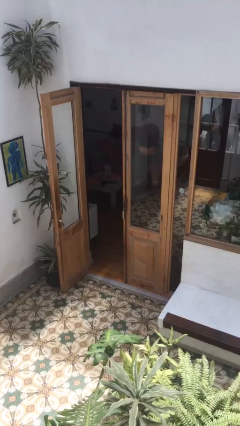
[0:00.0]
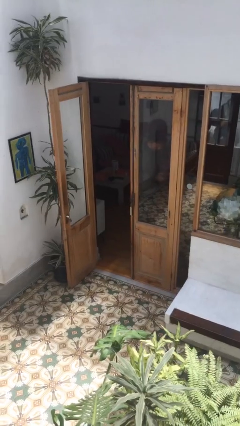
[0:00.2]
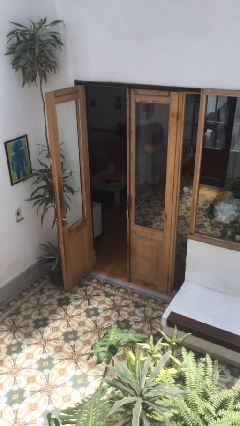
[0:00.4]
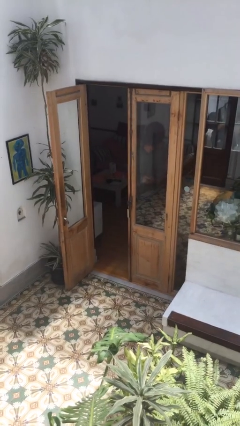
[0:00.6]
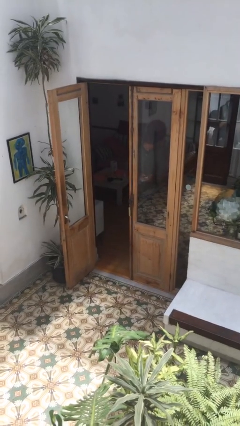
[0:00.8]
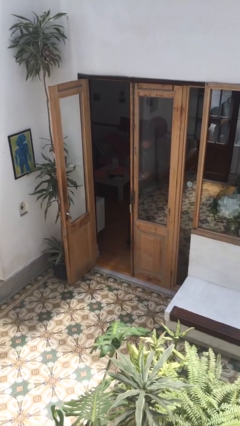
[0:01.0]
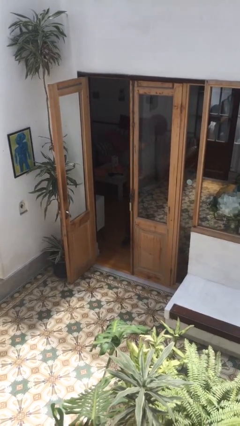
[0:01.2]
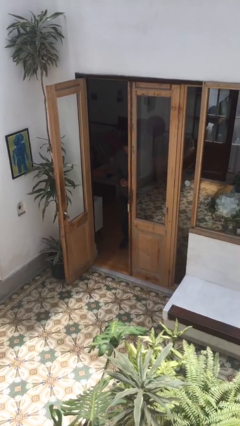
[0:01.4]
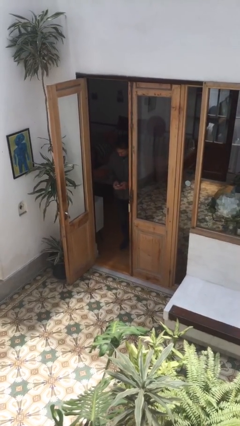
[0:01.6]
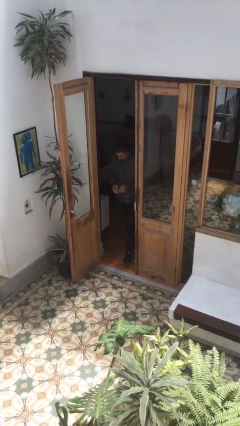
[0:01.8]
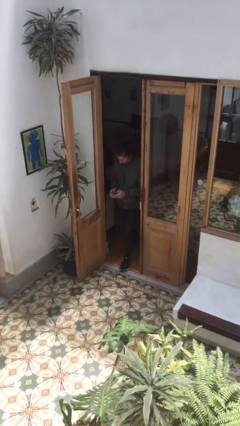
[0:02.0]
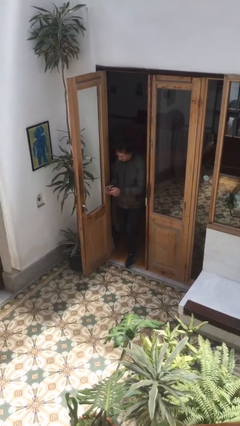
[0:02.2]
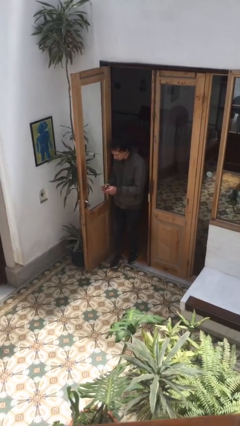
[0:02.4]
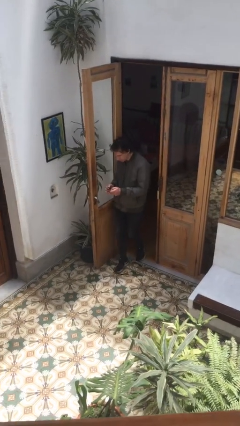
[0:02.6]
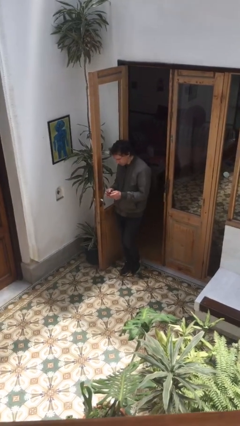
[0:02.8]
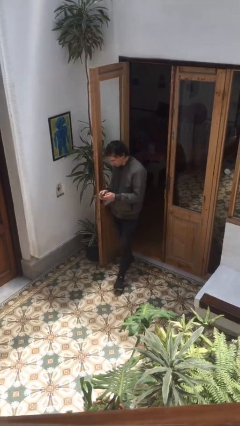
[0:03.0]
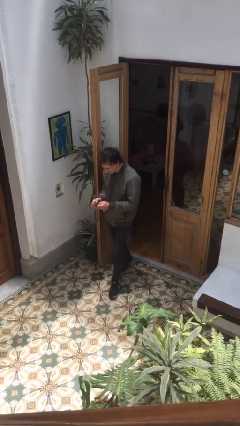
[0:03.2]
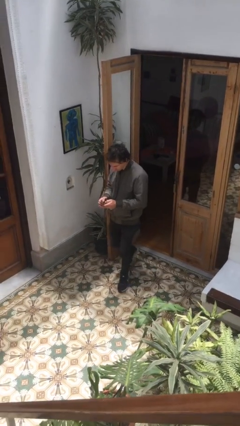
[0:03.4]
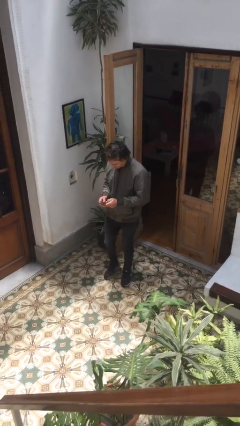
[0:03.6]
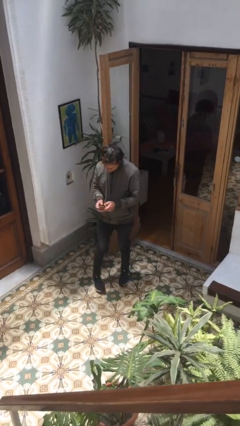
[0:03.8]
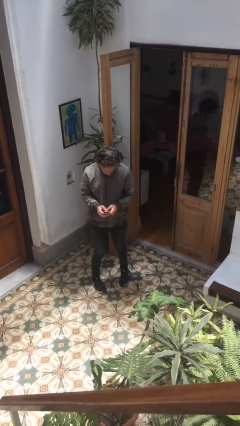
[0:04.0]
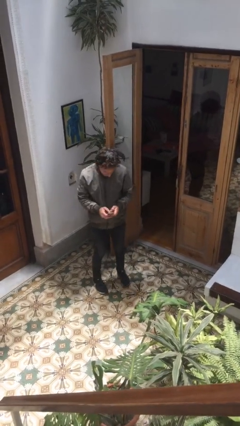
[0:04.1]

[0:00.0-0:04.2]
person enters scene through structure

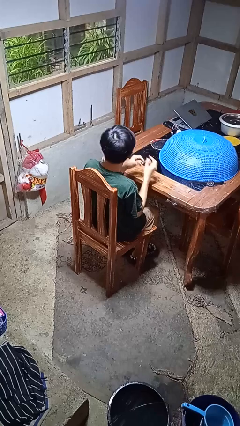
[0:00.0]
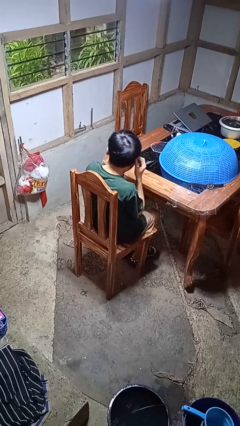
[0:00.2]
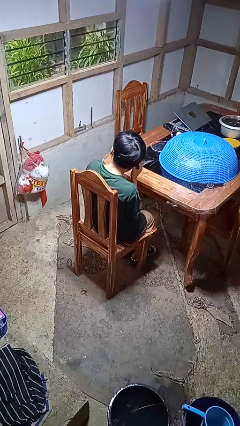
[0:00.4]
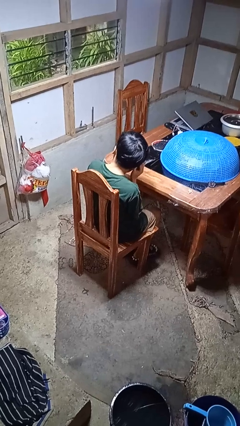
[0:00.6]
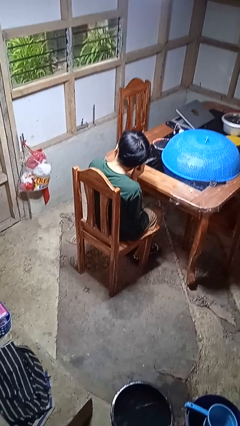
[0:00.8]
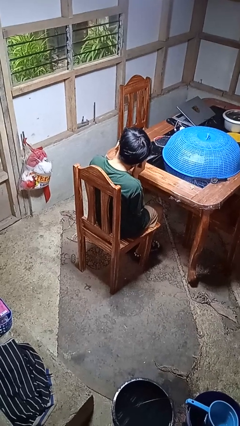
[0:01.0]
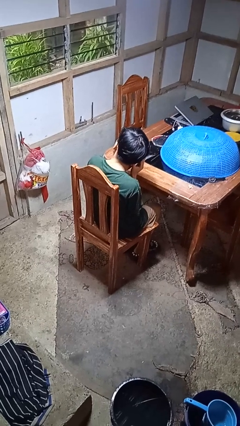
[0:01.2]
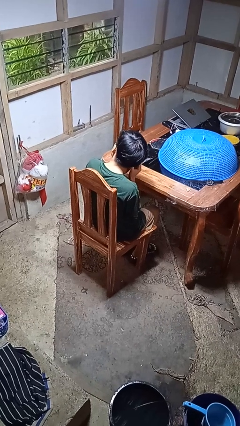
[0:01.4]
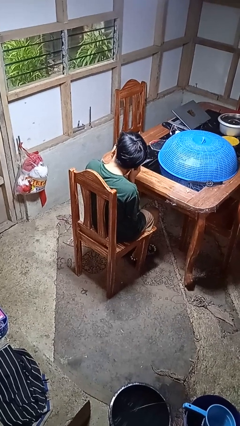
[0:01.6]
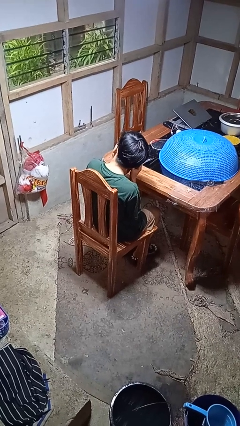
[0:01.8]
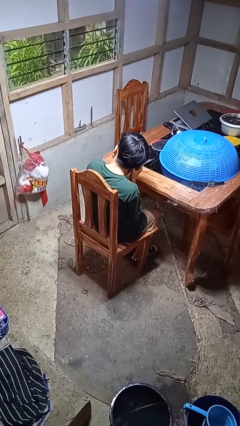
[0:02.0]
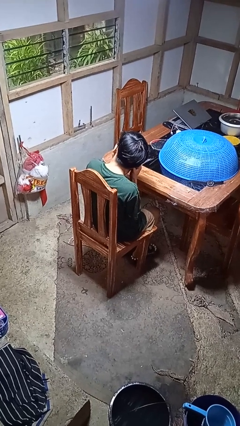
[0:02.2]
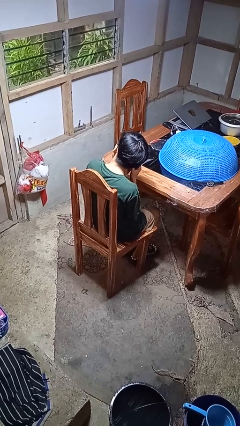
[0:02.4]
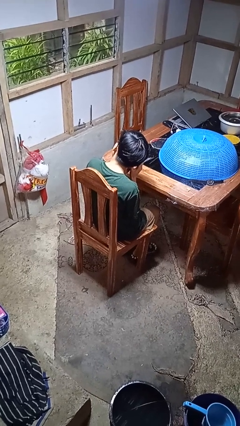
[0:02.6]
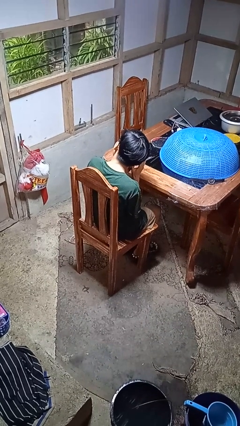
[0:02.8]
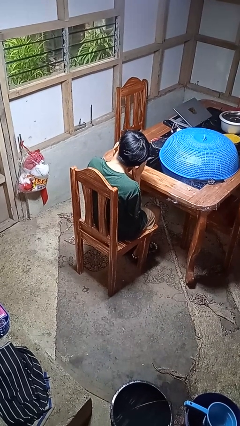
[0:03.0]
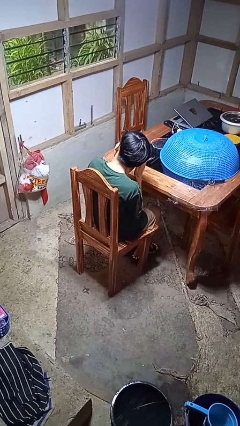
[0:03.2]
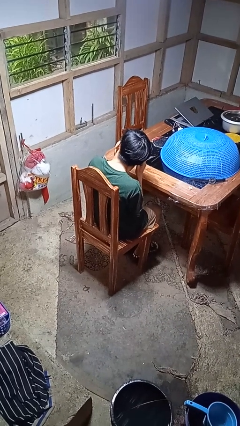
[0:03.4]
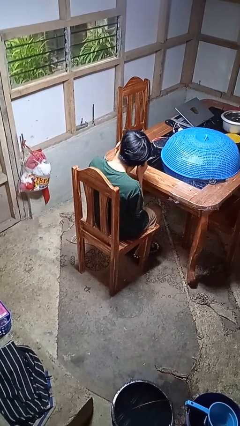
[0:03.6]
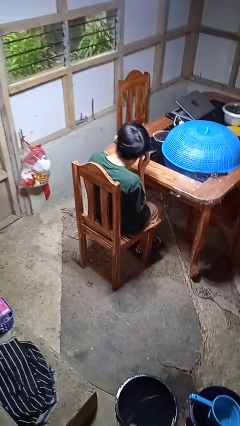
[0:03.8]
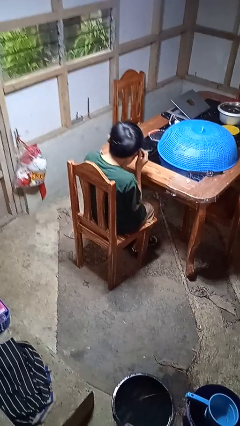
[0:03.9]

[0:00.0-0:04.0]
person takes off earrings

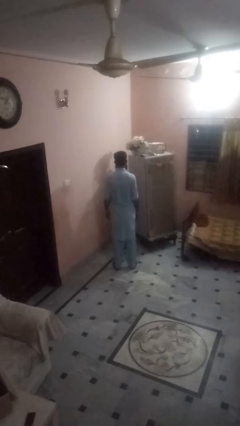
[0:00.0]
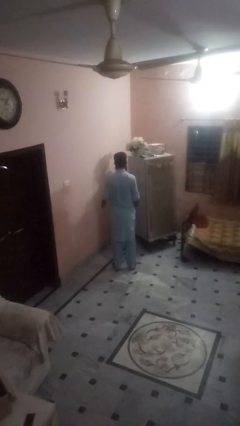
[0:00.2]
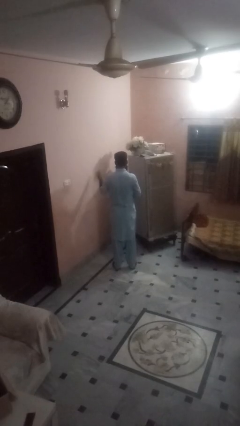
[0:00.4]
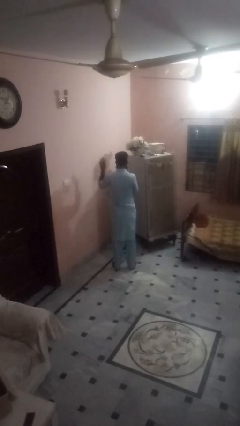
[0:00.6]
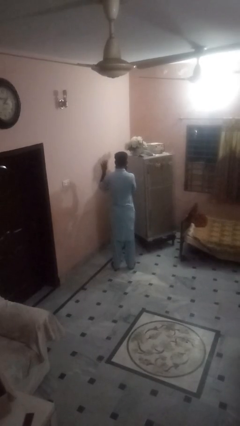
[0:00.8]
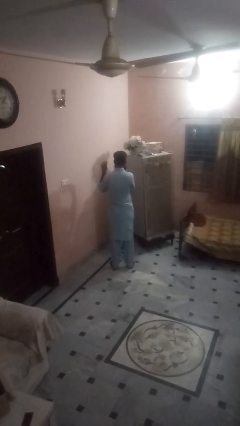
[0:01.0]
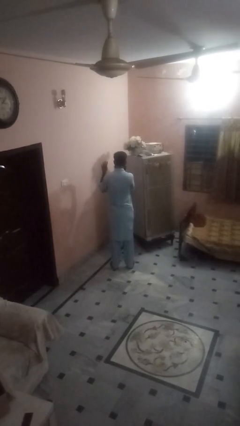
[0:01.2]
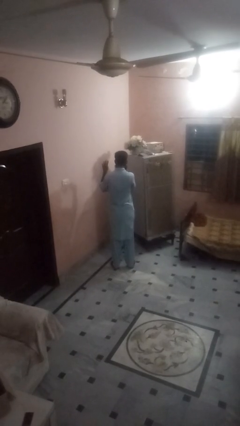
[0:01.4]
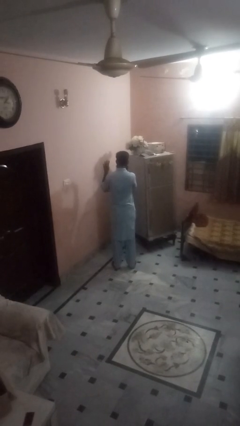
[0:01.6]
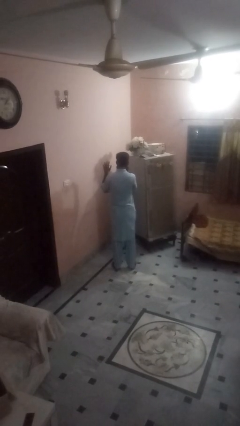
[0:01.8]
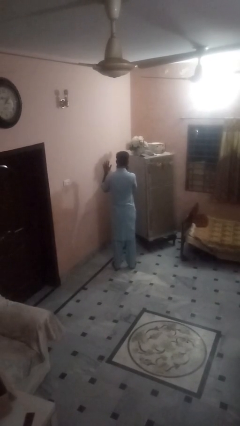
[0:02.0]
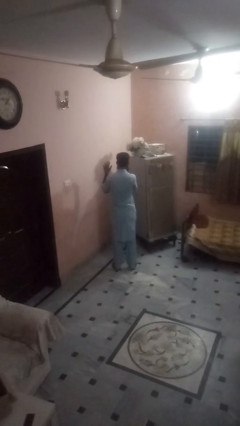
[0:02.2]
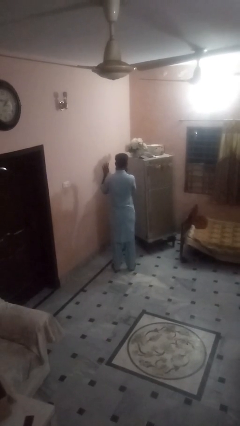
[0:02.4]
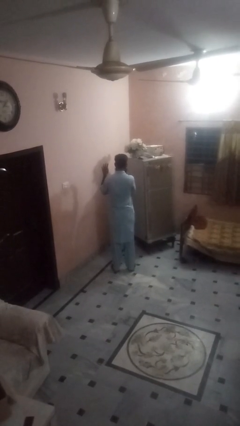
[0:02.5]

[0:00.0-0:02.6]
person gestures number four

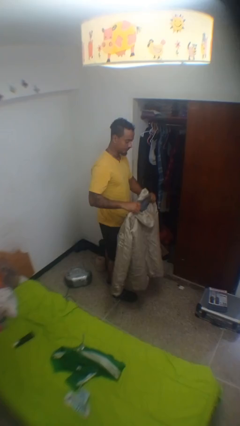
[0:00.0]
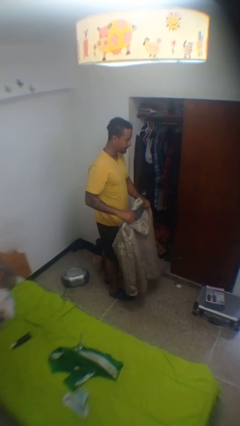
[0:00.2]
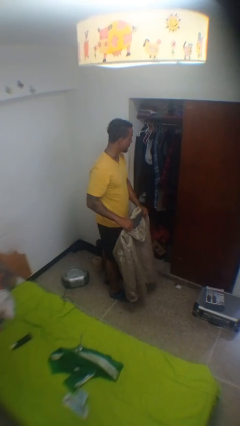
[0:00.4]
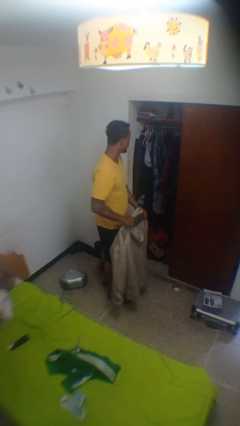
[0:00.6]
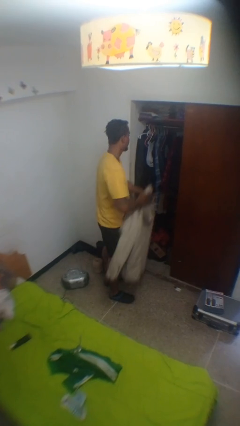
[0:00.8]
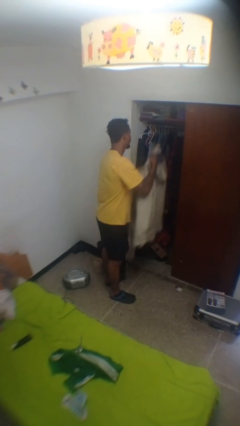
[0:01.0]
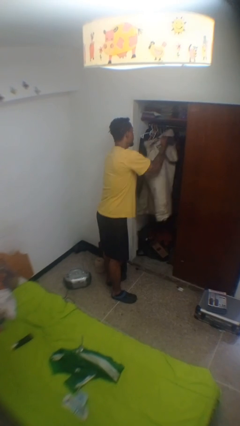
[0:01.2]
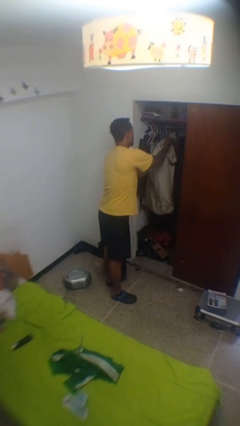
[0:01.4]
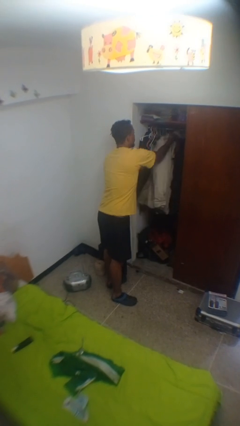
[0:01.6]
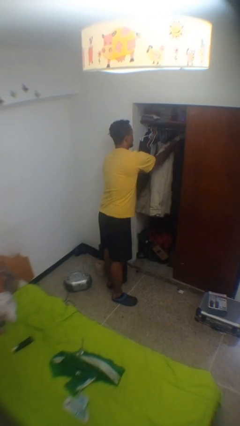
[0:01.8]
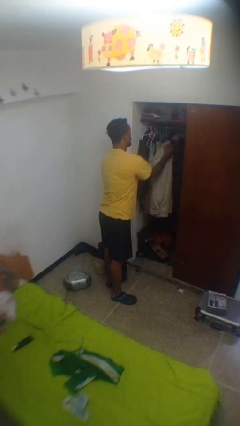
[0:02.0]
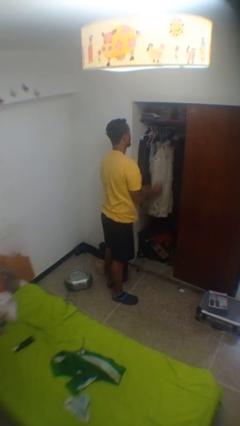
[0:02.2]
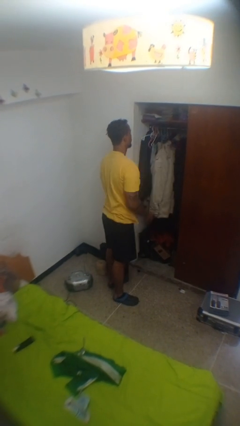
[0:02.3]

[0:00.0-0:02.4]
person puts clothes into closet

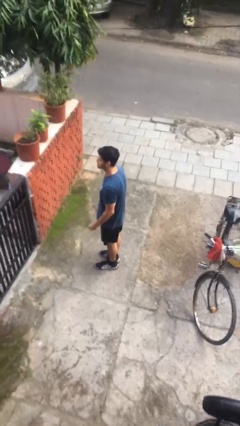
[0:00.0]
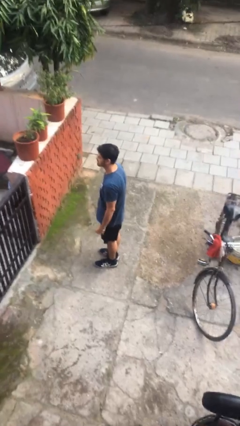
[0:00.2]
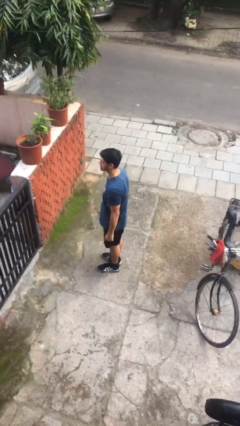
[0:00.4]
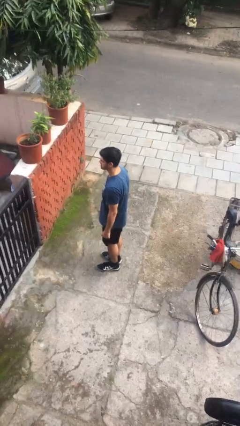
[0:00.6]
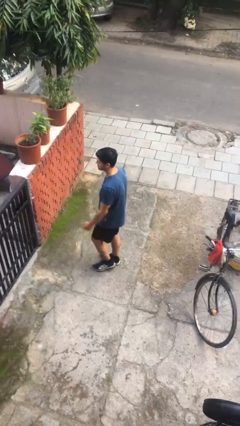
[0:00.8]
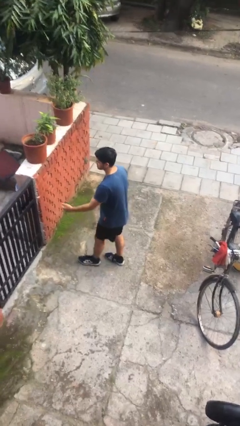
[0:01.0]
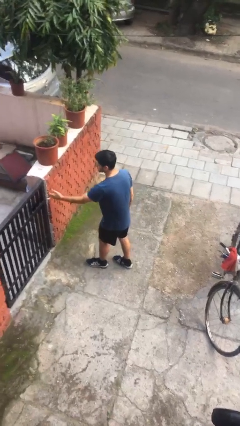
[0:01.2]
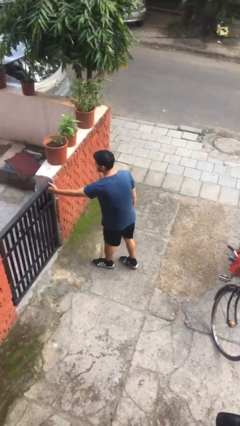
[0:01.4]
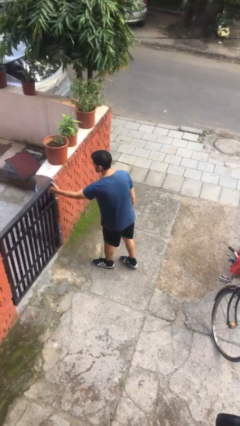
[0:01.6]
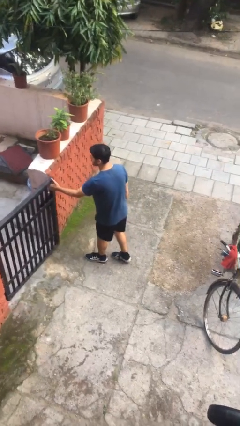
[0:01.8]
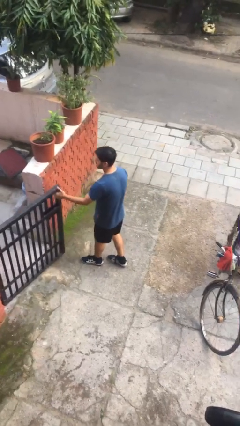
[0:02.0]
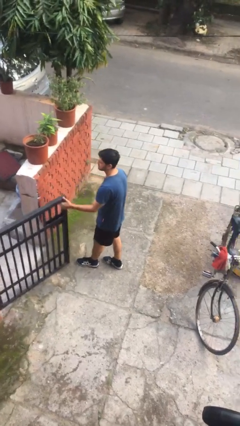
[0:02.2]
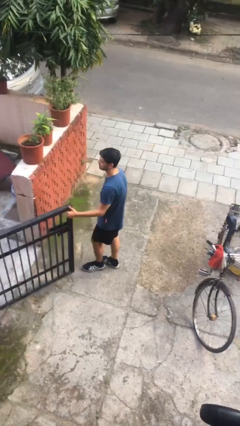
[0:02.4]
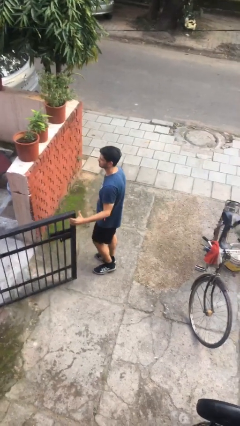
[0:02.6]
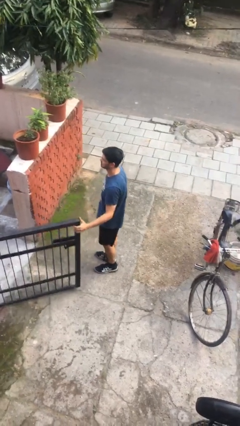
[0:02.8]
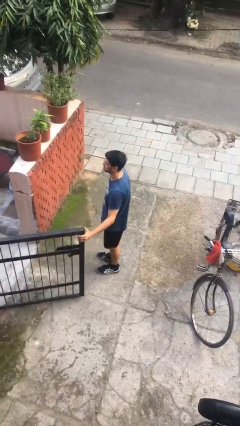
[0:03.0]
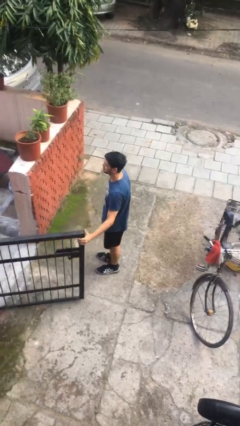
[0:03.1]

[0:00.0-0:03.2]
person opens gate

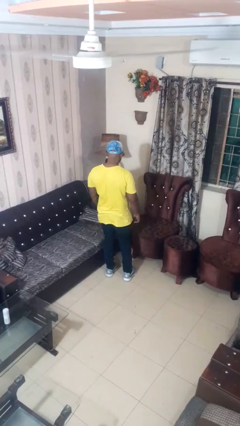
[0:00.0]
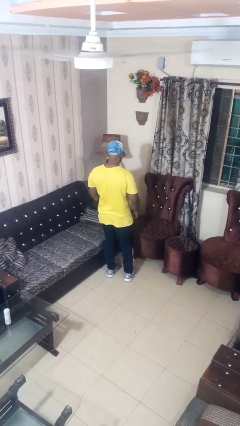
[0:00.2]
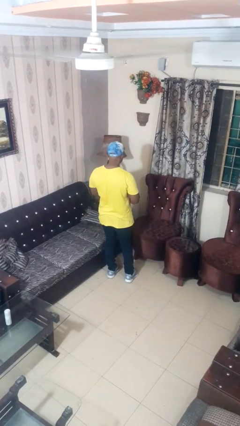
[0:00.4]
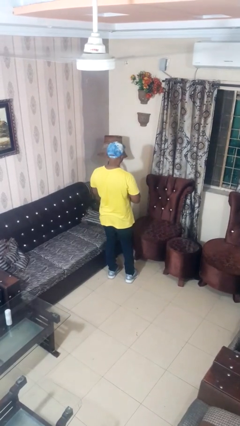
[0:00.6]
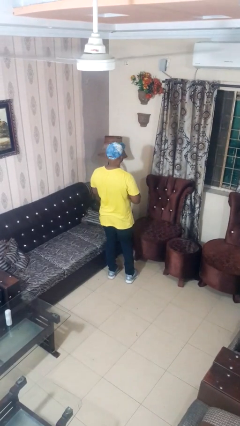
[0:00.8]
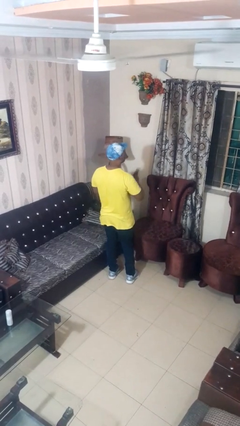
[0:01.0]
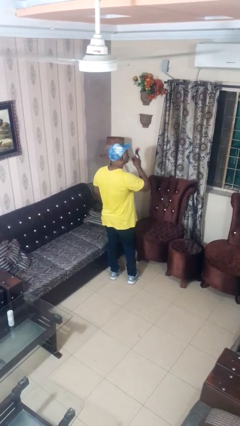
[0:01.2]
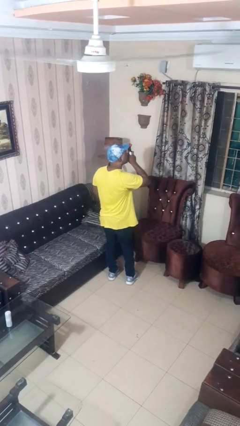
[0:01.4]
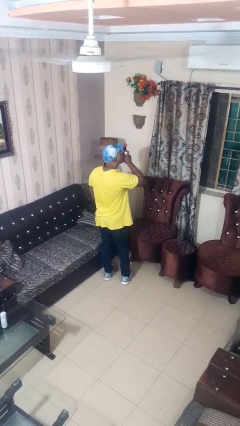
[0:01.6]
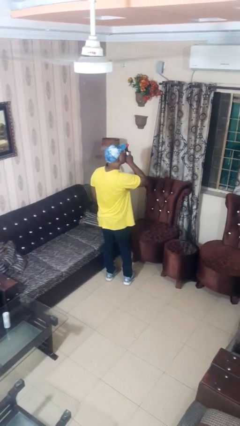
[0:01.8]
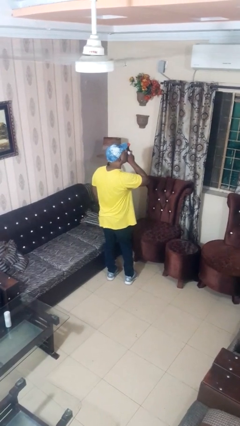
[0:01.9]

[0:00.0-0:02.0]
person vapes
